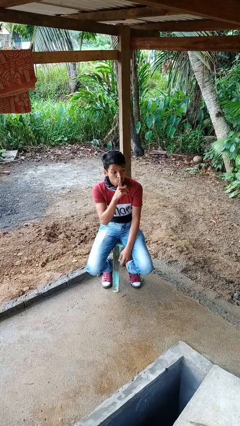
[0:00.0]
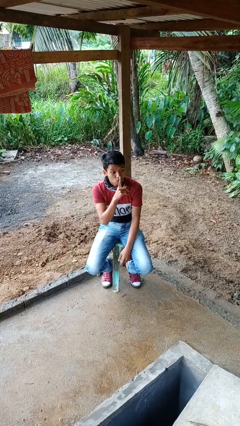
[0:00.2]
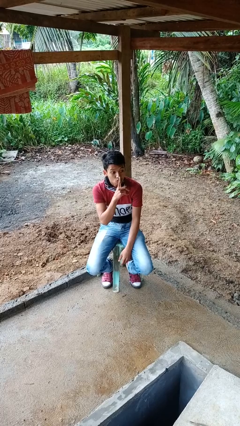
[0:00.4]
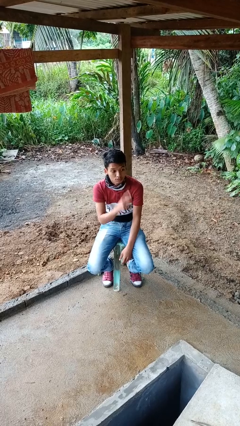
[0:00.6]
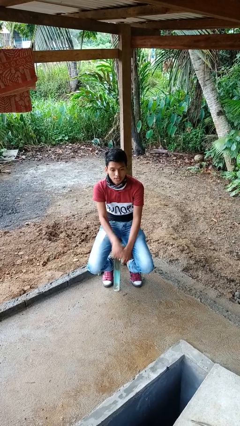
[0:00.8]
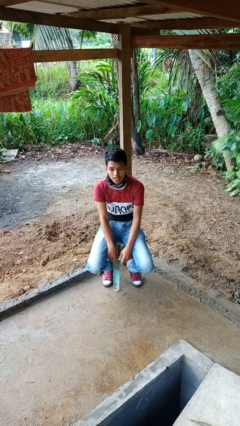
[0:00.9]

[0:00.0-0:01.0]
person gestures be quiet

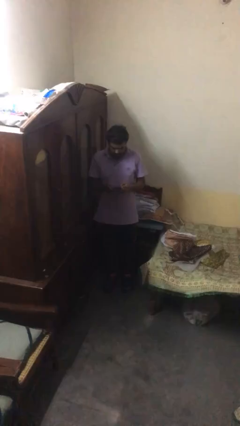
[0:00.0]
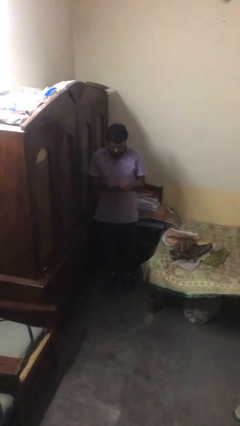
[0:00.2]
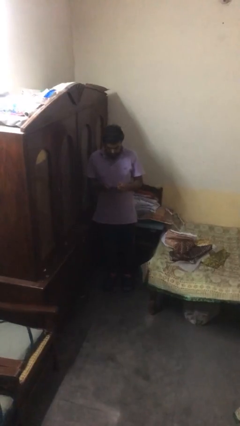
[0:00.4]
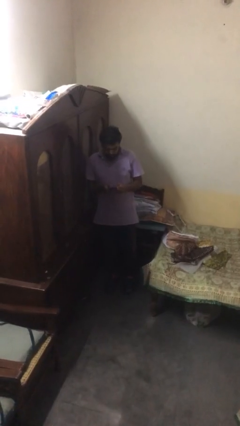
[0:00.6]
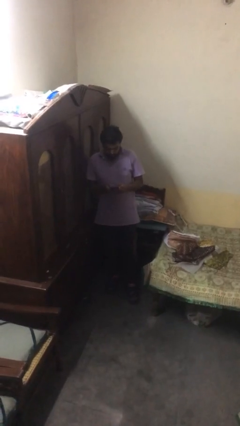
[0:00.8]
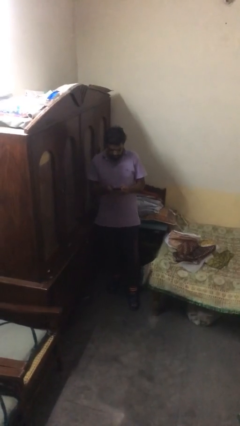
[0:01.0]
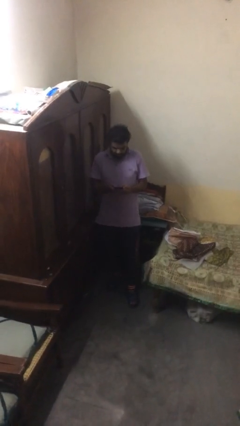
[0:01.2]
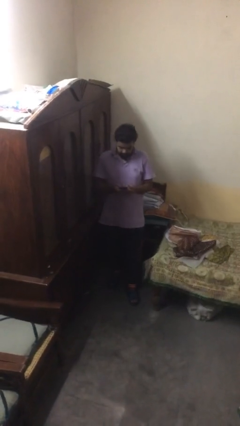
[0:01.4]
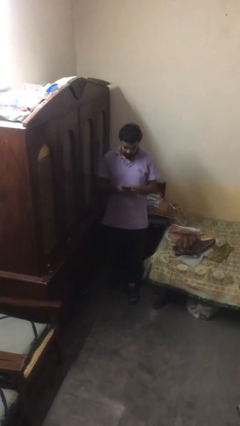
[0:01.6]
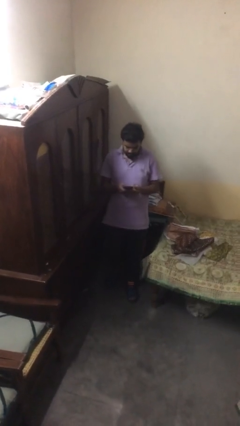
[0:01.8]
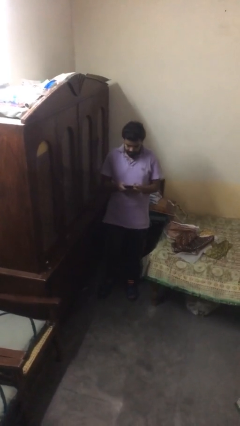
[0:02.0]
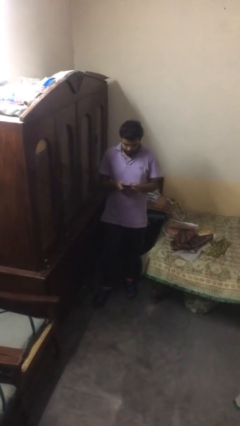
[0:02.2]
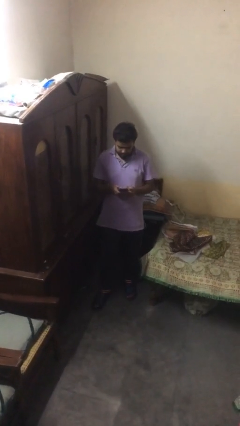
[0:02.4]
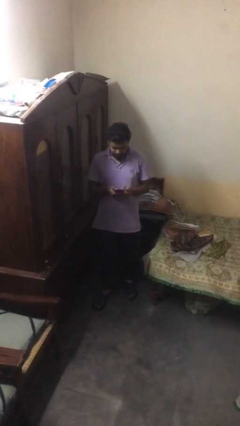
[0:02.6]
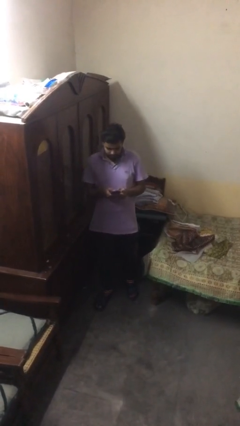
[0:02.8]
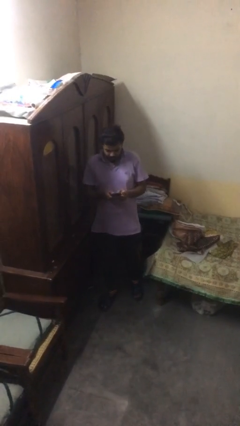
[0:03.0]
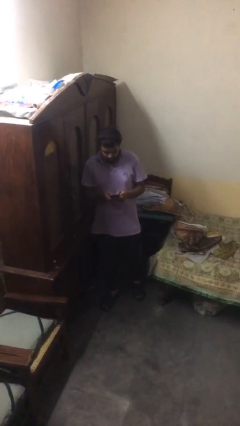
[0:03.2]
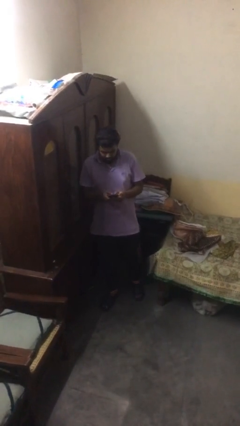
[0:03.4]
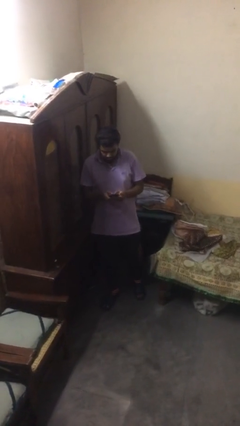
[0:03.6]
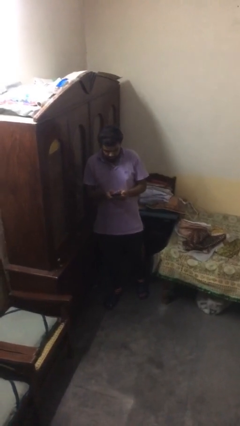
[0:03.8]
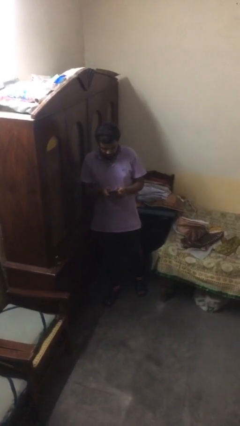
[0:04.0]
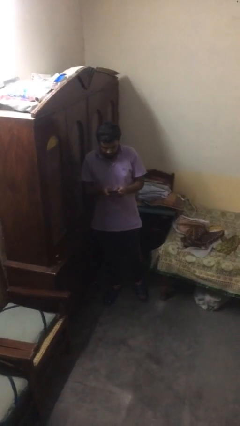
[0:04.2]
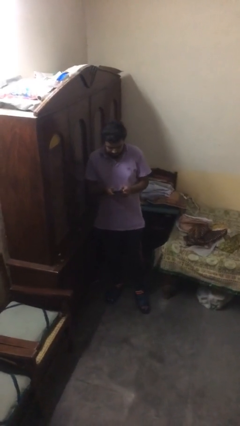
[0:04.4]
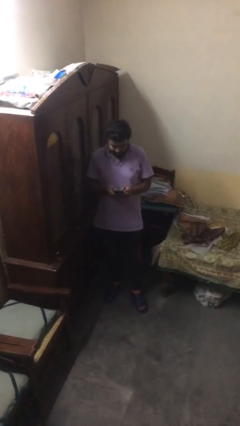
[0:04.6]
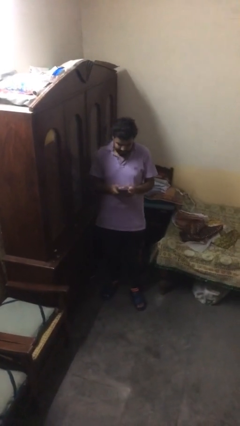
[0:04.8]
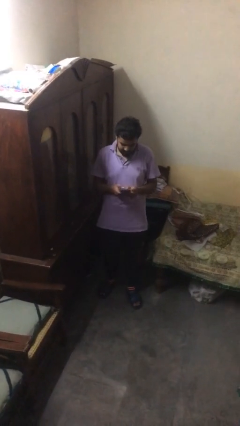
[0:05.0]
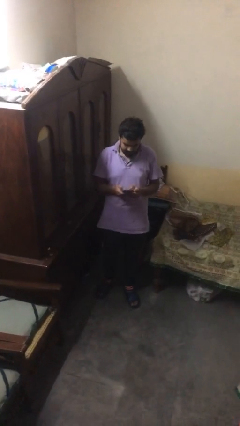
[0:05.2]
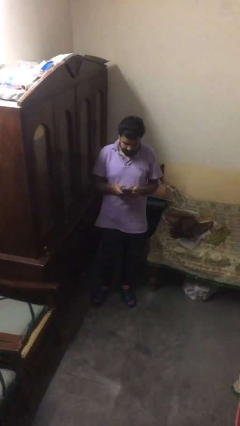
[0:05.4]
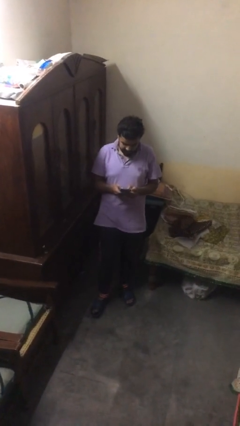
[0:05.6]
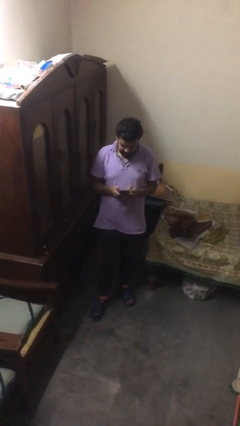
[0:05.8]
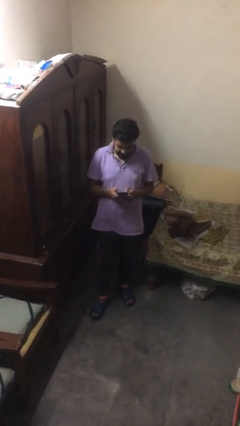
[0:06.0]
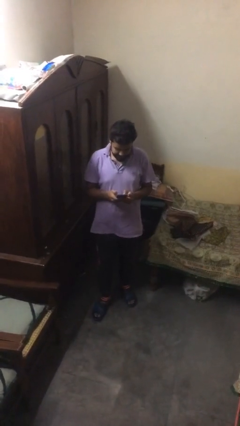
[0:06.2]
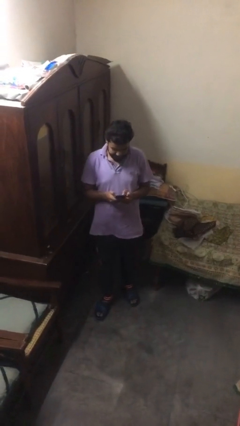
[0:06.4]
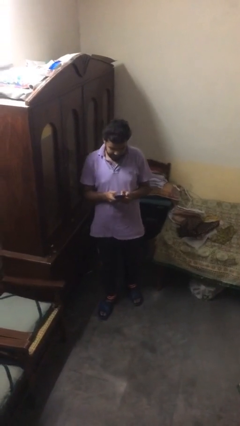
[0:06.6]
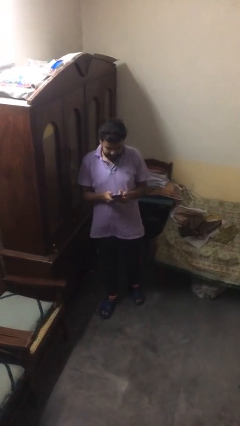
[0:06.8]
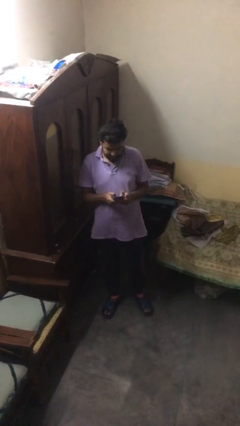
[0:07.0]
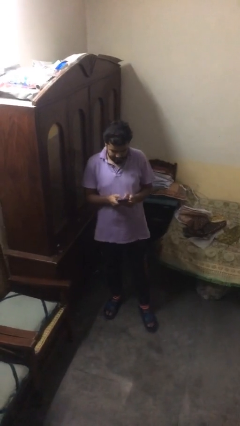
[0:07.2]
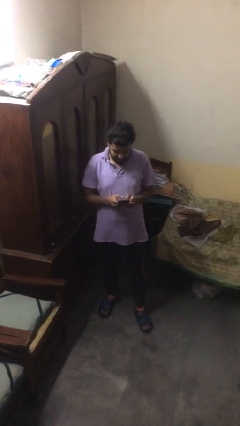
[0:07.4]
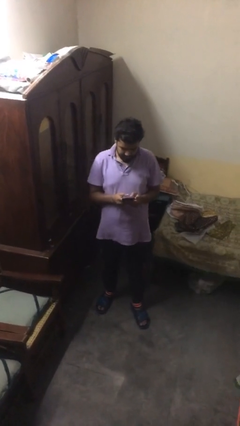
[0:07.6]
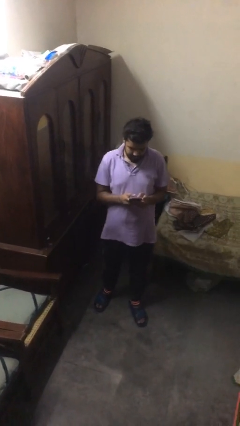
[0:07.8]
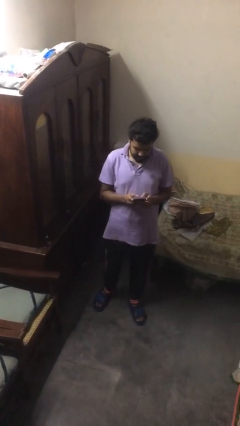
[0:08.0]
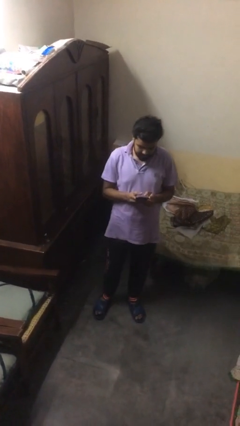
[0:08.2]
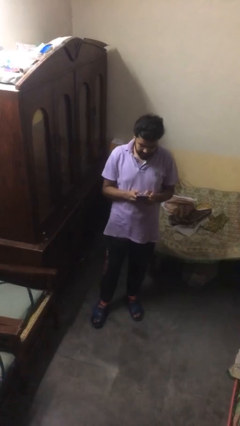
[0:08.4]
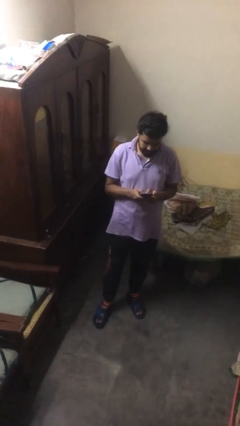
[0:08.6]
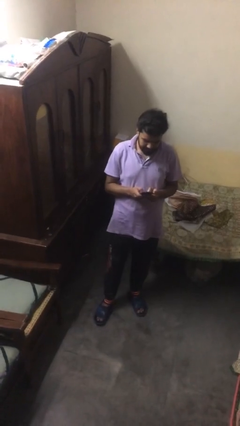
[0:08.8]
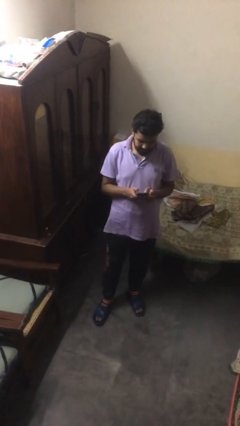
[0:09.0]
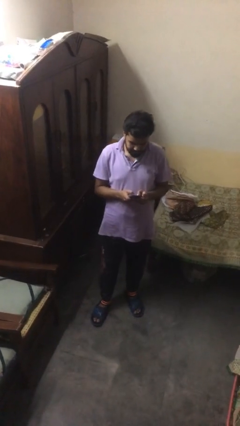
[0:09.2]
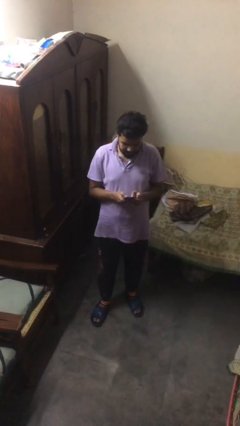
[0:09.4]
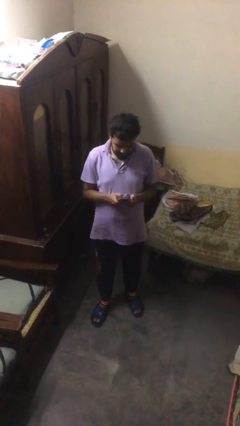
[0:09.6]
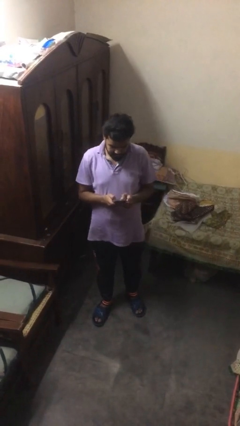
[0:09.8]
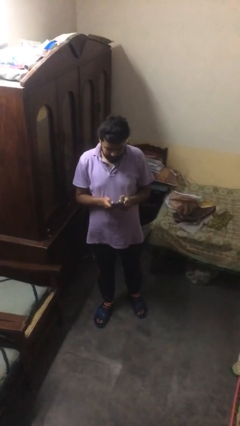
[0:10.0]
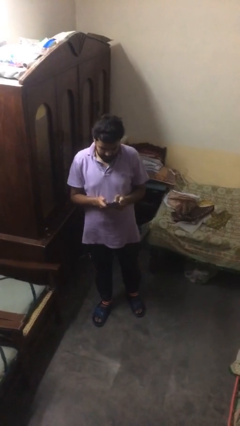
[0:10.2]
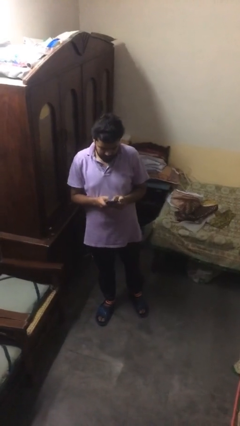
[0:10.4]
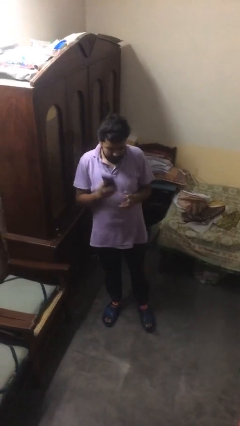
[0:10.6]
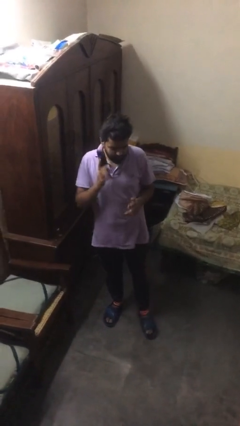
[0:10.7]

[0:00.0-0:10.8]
person texts on phone

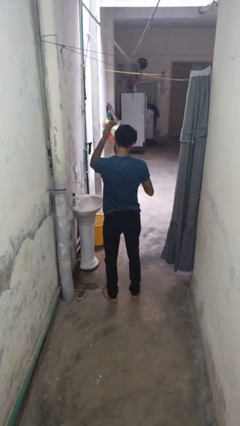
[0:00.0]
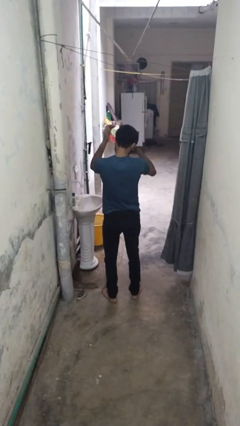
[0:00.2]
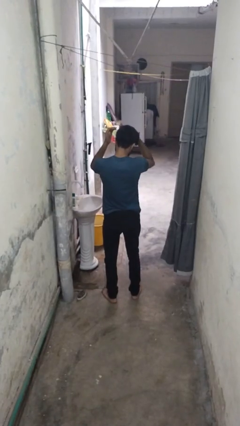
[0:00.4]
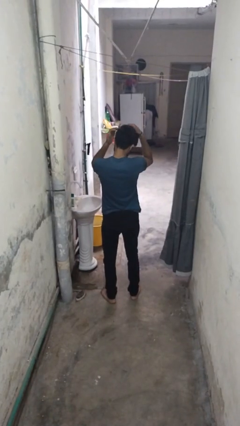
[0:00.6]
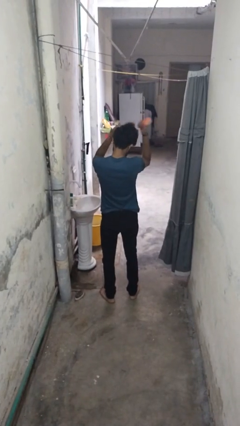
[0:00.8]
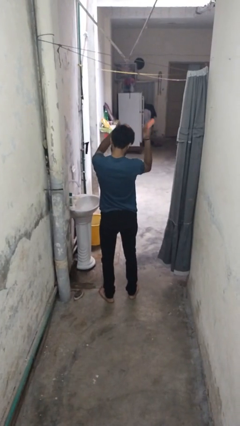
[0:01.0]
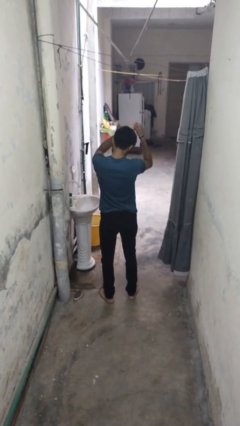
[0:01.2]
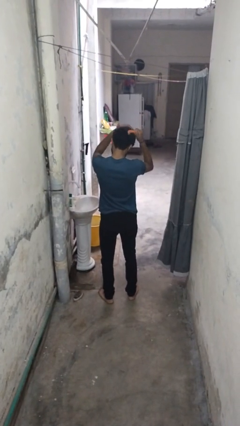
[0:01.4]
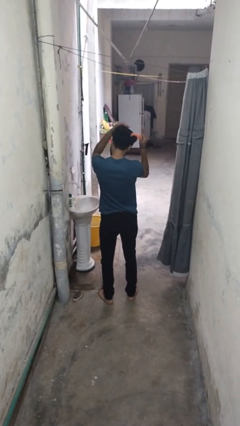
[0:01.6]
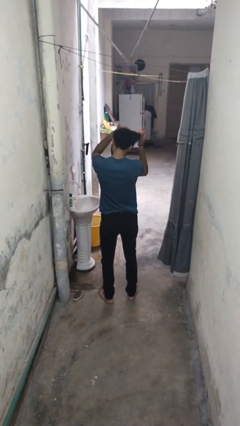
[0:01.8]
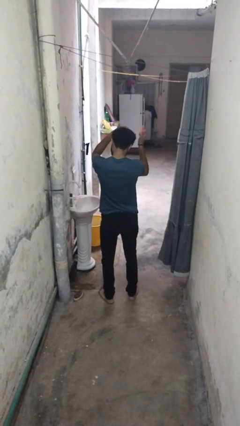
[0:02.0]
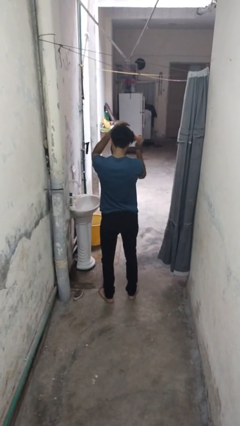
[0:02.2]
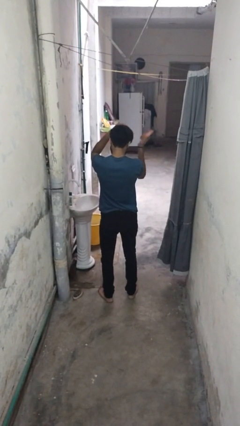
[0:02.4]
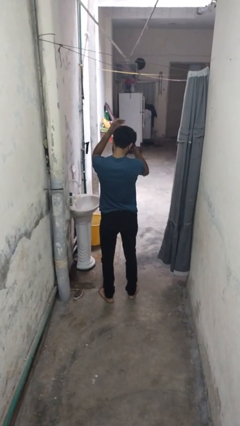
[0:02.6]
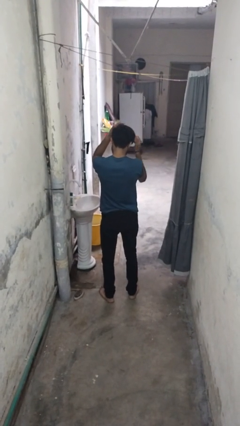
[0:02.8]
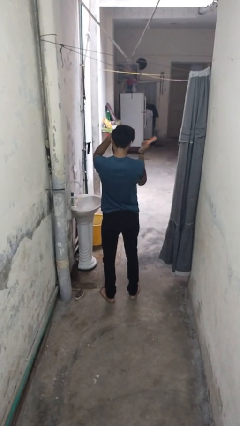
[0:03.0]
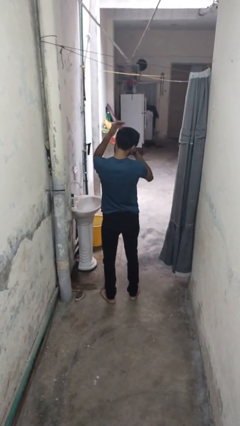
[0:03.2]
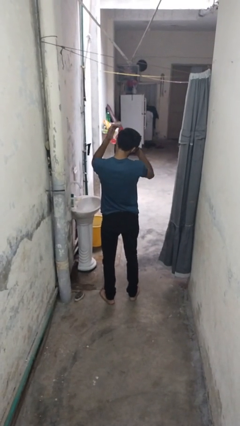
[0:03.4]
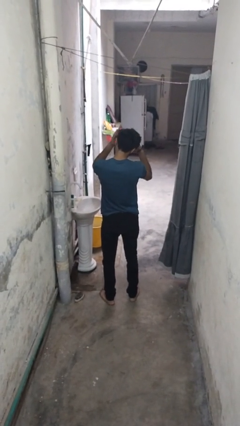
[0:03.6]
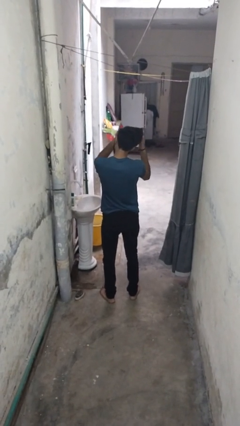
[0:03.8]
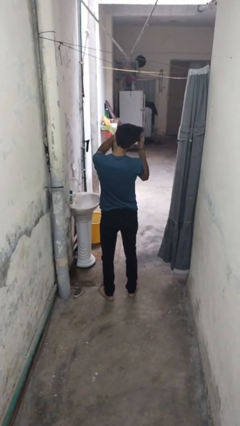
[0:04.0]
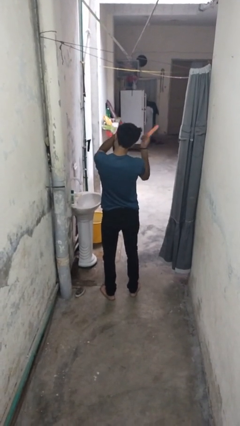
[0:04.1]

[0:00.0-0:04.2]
person brushes hair

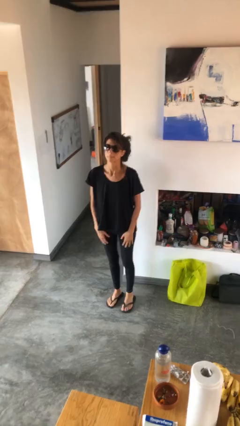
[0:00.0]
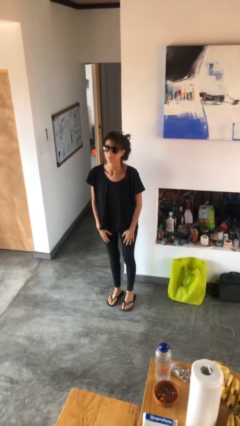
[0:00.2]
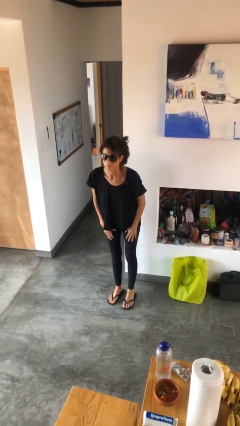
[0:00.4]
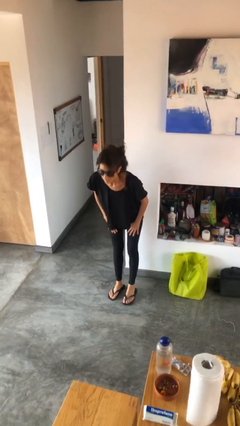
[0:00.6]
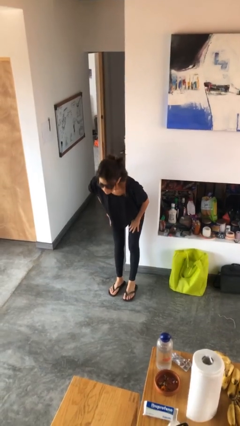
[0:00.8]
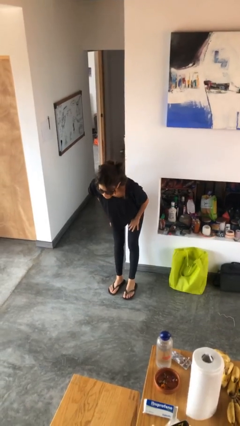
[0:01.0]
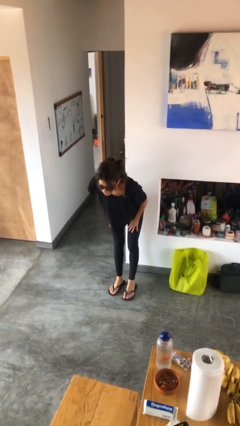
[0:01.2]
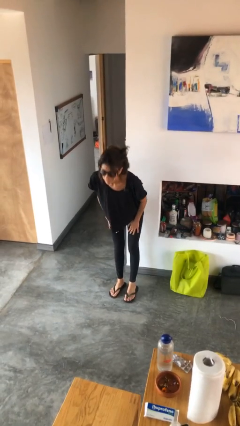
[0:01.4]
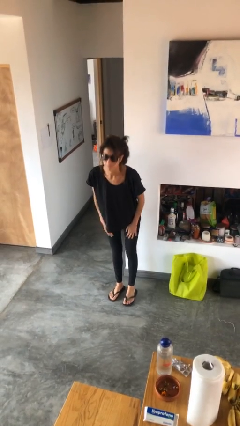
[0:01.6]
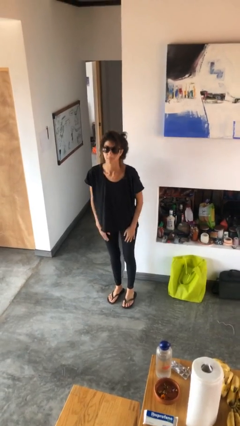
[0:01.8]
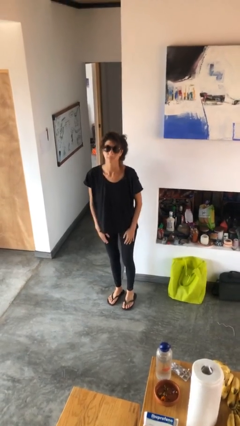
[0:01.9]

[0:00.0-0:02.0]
person bows
